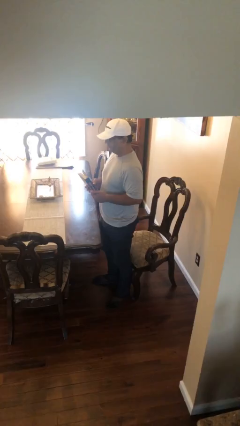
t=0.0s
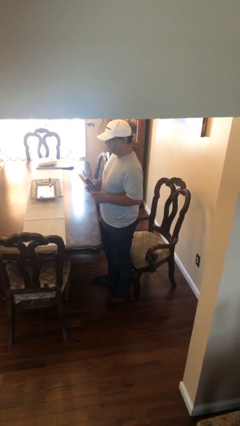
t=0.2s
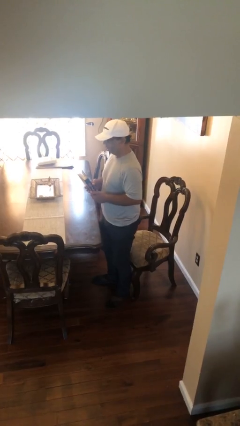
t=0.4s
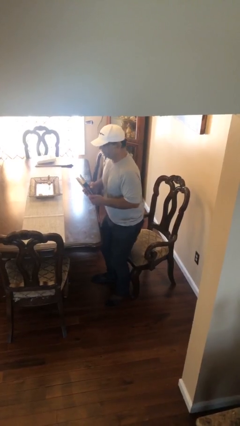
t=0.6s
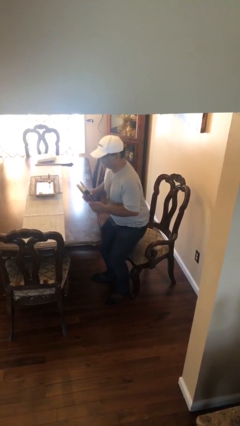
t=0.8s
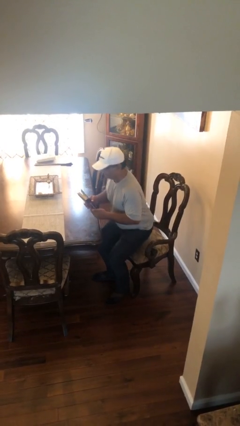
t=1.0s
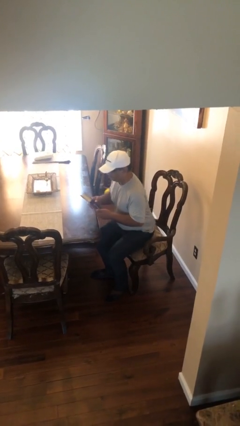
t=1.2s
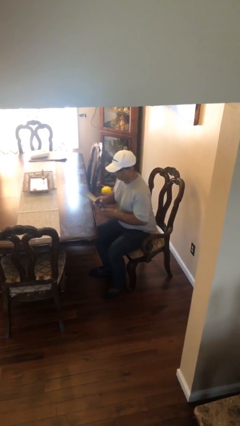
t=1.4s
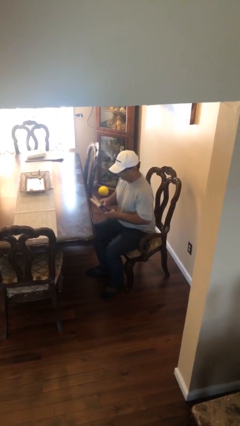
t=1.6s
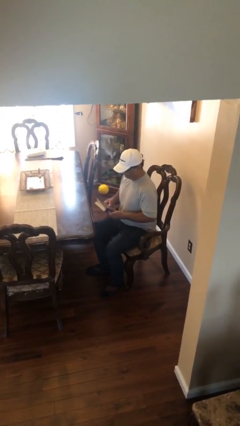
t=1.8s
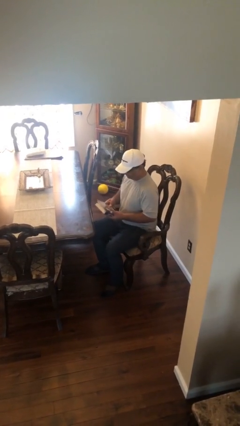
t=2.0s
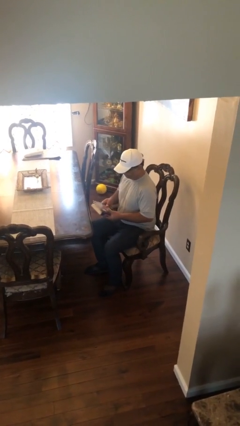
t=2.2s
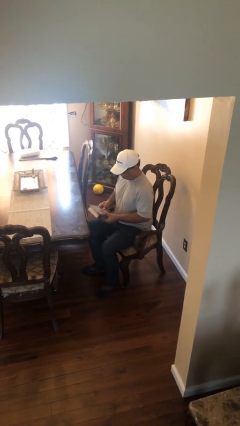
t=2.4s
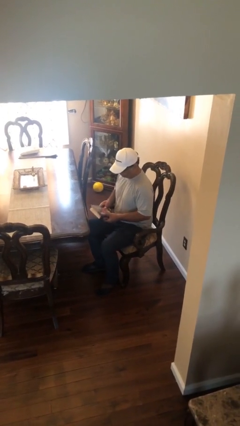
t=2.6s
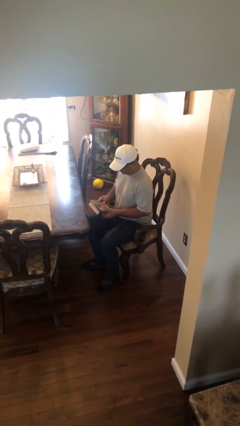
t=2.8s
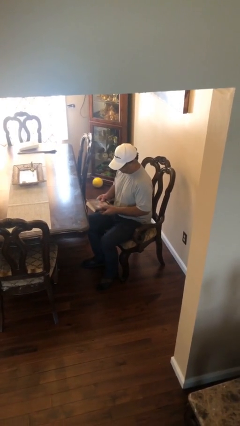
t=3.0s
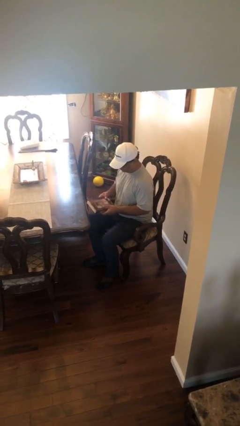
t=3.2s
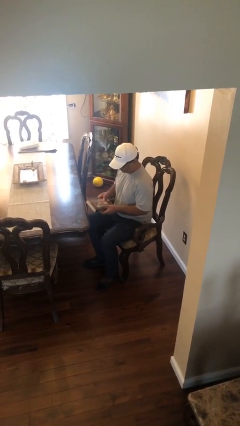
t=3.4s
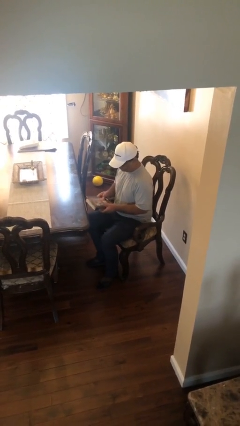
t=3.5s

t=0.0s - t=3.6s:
person sits down

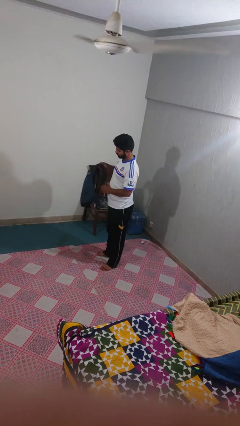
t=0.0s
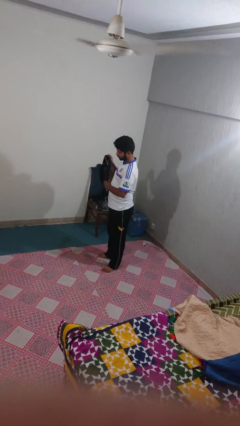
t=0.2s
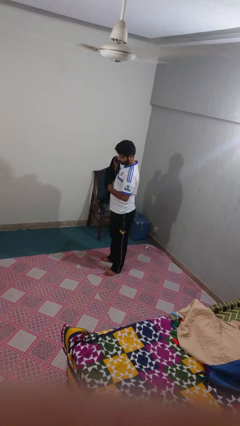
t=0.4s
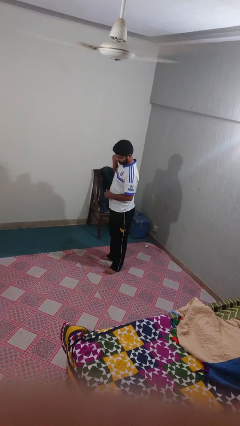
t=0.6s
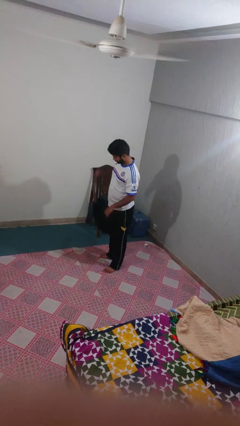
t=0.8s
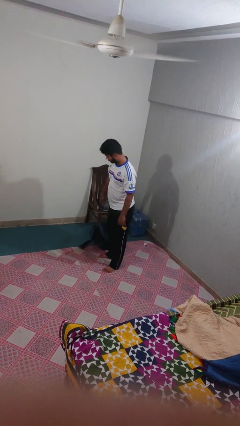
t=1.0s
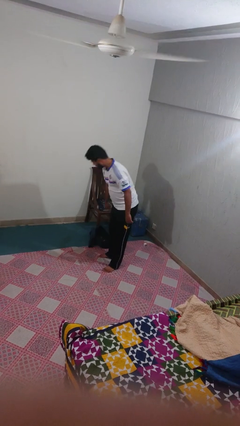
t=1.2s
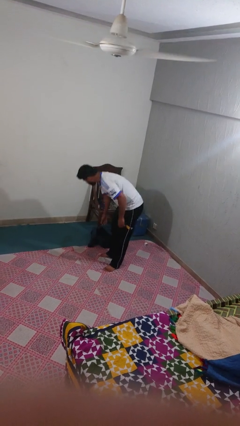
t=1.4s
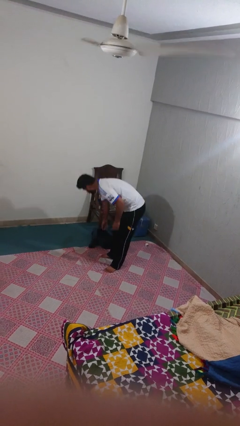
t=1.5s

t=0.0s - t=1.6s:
person drops object

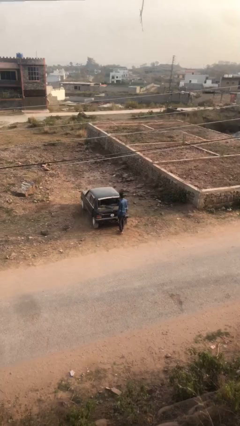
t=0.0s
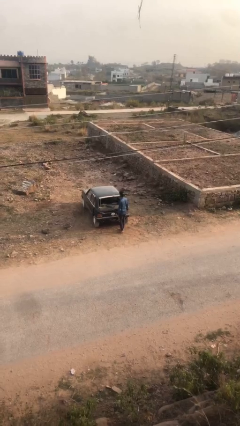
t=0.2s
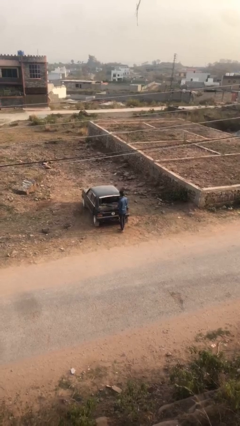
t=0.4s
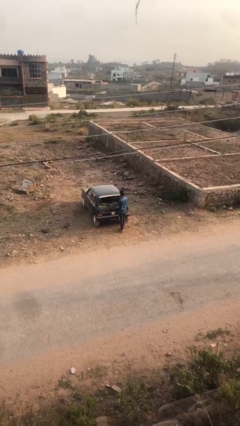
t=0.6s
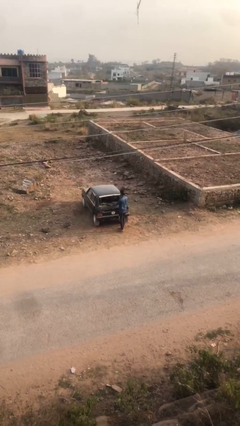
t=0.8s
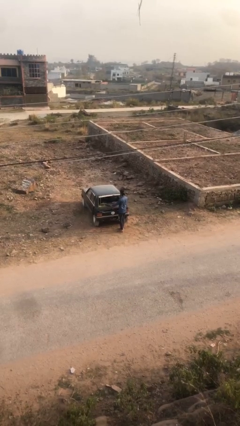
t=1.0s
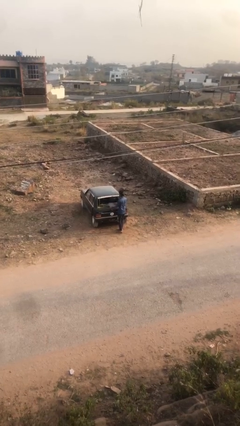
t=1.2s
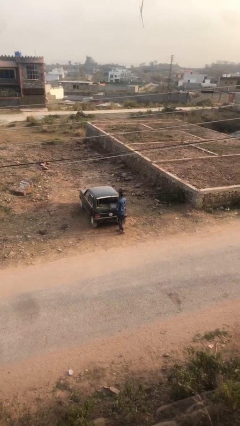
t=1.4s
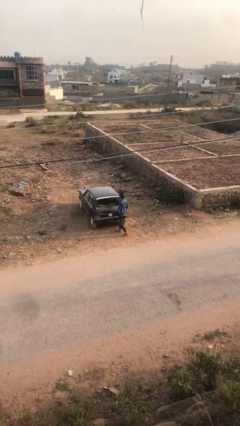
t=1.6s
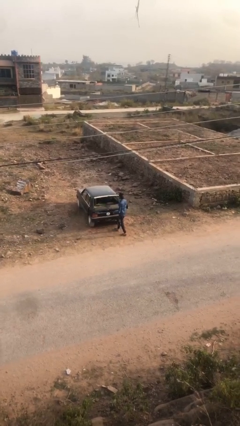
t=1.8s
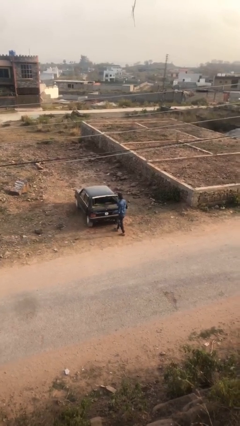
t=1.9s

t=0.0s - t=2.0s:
person unloads car

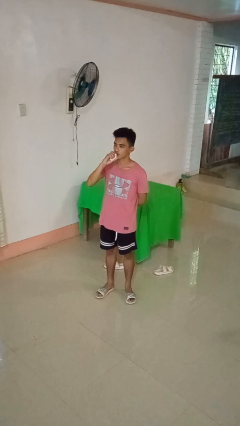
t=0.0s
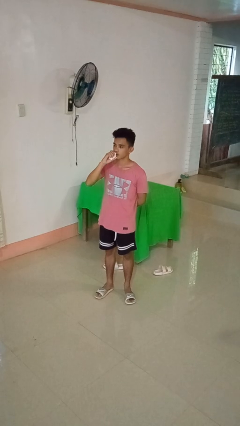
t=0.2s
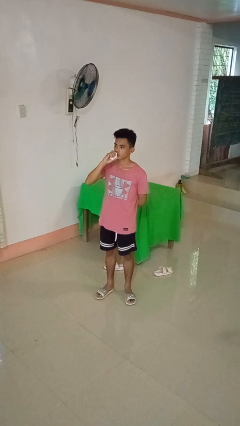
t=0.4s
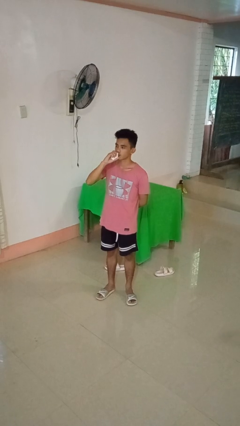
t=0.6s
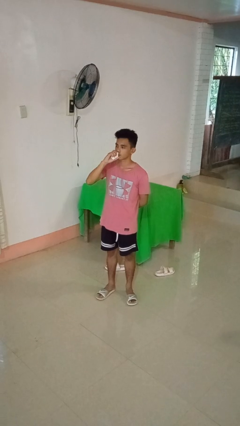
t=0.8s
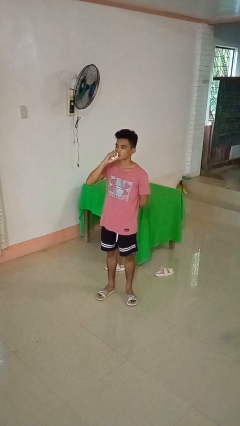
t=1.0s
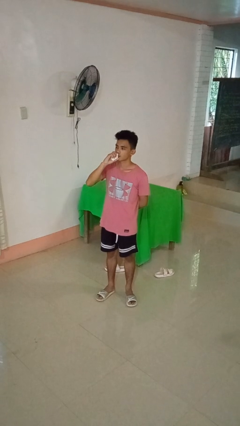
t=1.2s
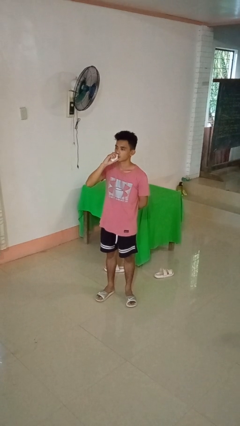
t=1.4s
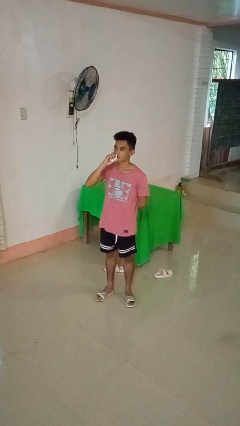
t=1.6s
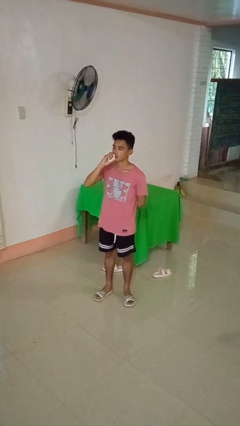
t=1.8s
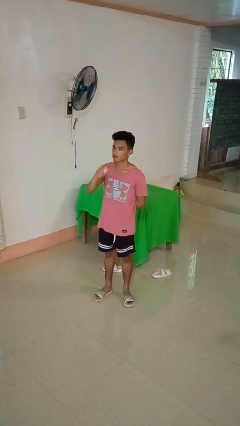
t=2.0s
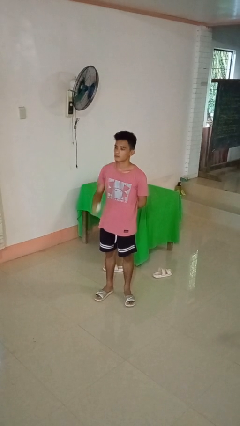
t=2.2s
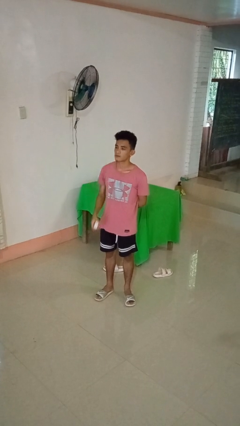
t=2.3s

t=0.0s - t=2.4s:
person vapes

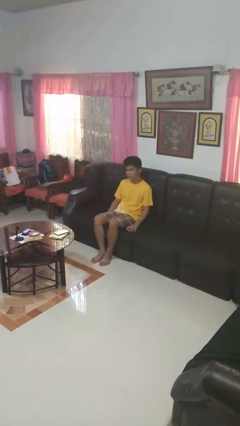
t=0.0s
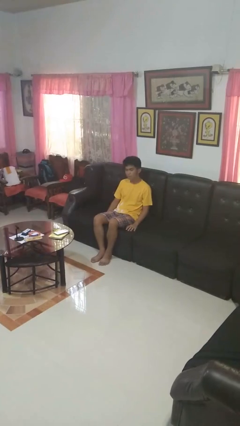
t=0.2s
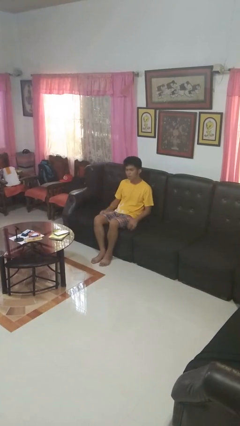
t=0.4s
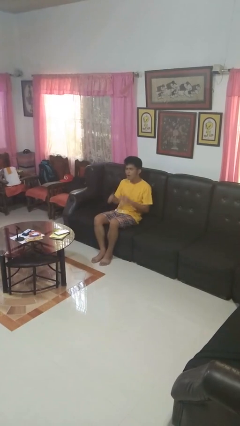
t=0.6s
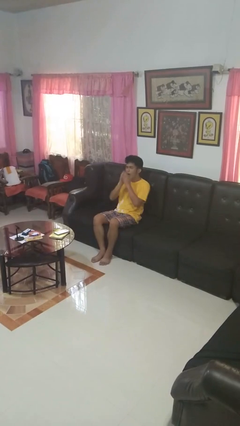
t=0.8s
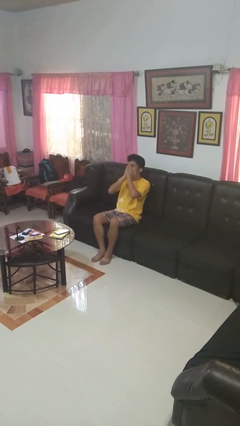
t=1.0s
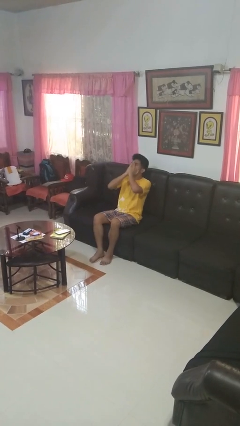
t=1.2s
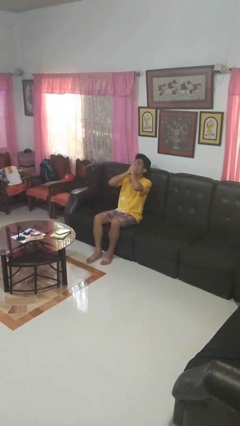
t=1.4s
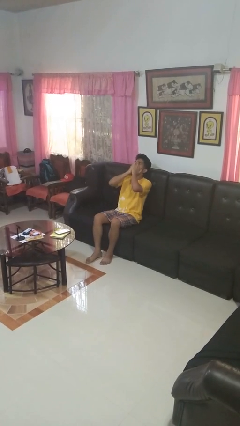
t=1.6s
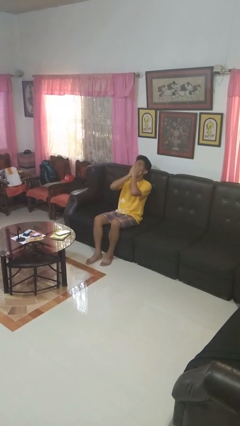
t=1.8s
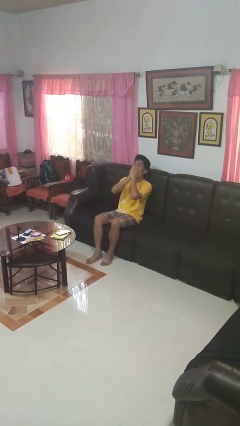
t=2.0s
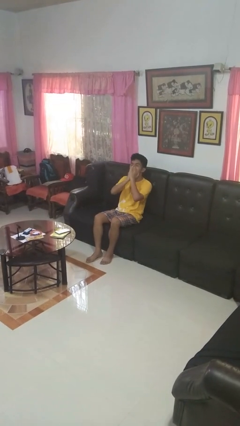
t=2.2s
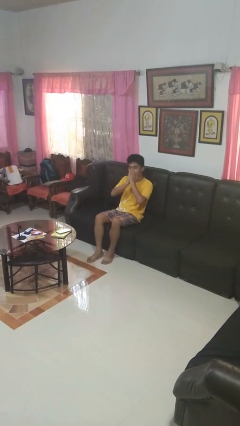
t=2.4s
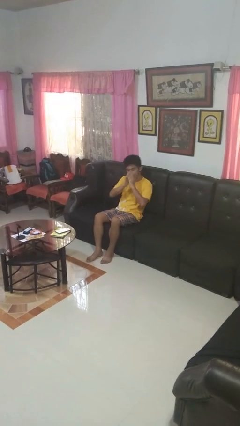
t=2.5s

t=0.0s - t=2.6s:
person yawns

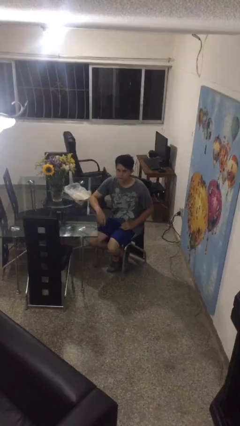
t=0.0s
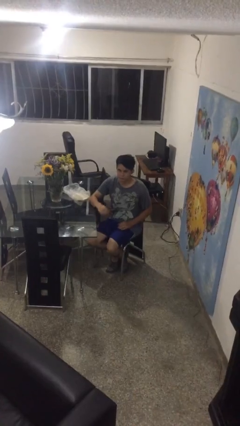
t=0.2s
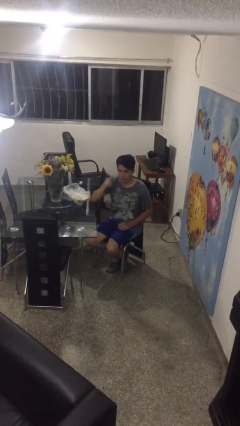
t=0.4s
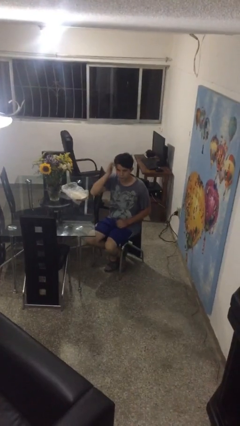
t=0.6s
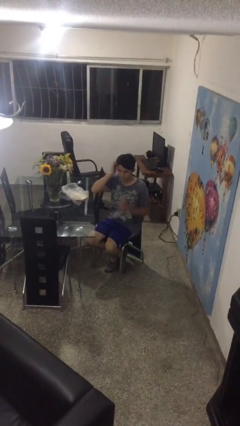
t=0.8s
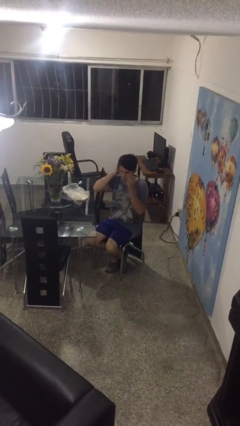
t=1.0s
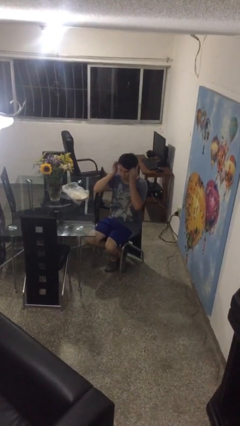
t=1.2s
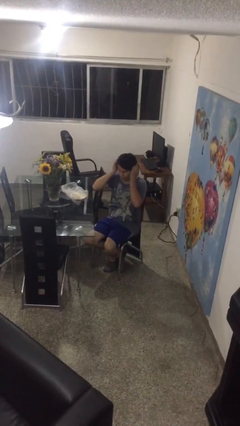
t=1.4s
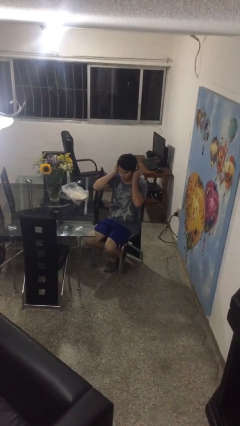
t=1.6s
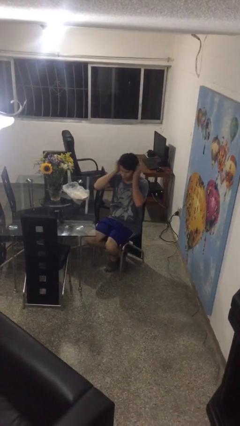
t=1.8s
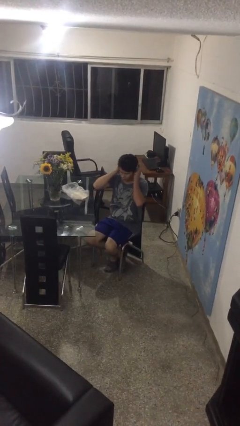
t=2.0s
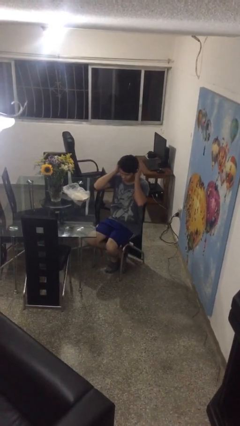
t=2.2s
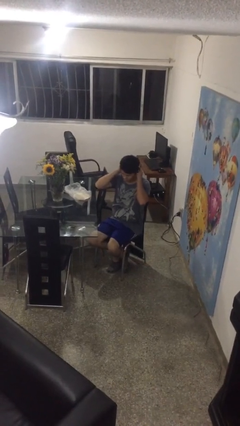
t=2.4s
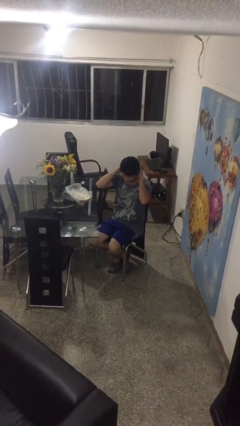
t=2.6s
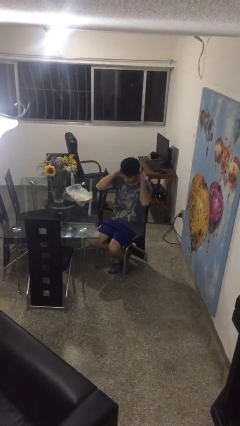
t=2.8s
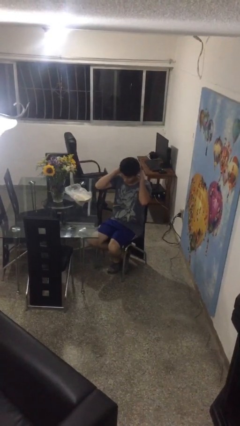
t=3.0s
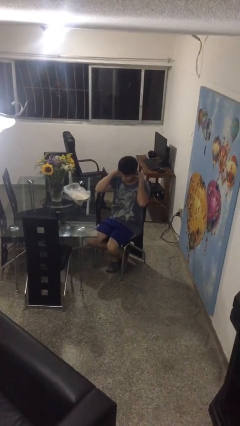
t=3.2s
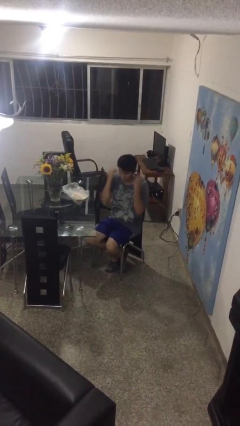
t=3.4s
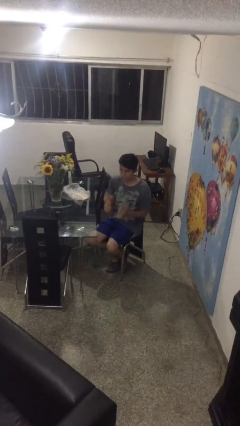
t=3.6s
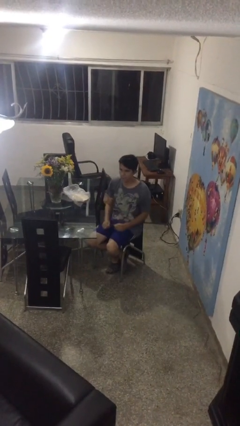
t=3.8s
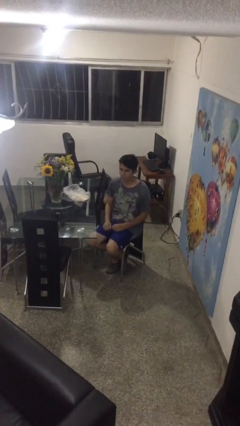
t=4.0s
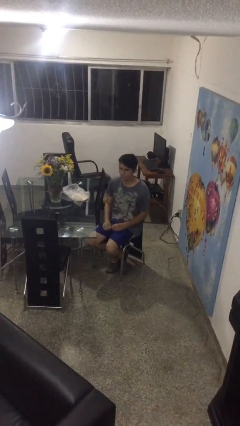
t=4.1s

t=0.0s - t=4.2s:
person strokes hair

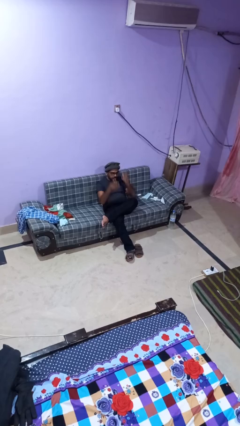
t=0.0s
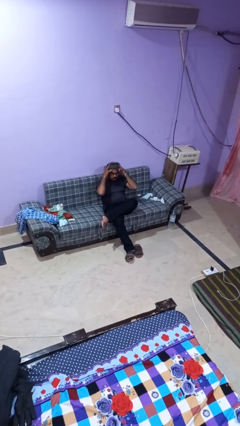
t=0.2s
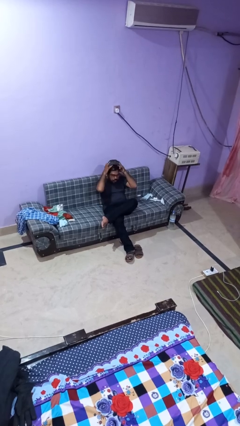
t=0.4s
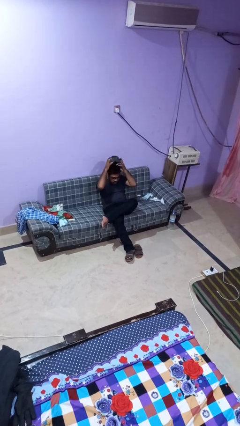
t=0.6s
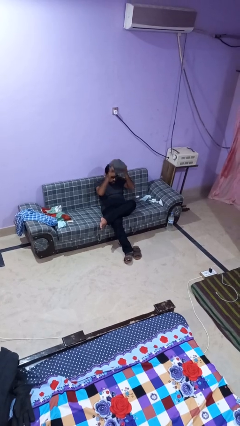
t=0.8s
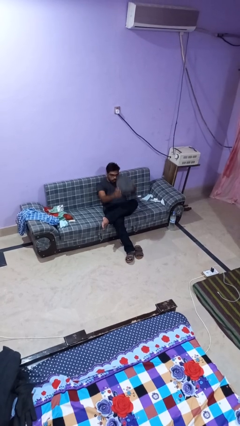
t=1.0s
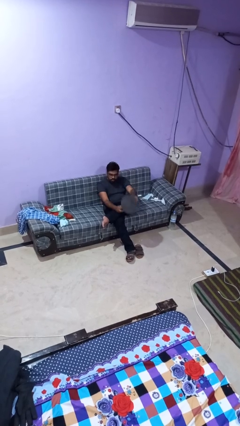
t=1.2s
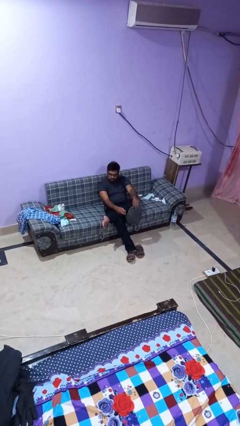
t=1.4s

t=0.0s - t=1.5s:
person takes off hat
